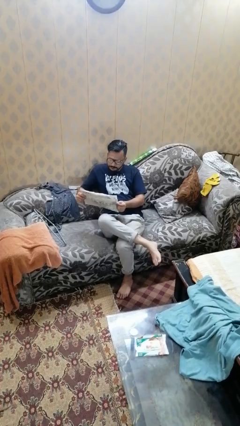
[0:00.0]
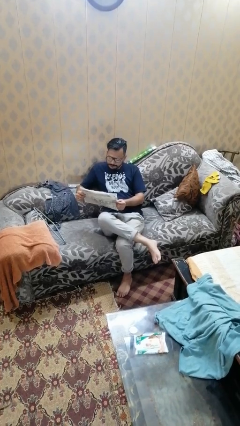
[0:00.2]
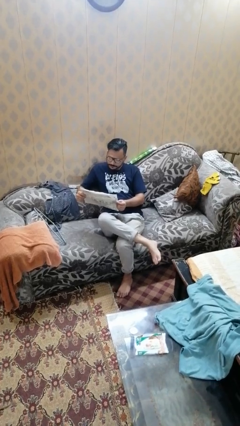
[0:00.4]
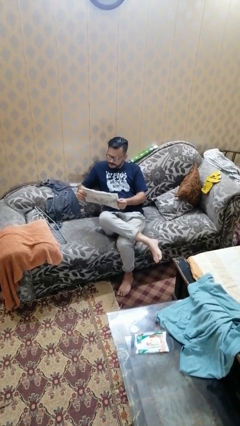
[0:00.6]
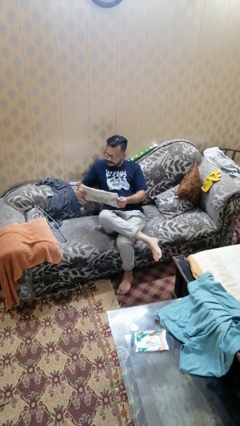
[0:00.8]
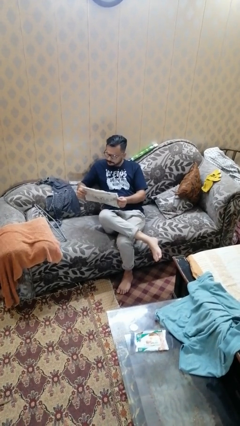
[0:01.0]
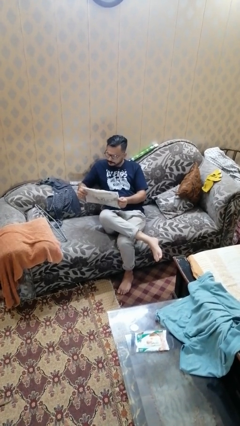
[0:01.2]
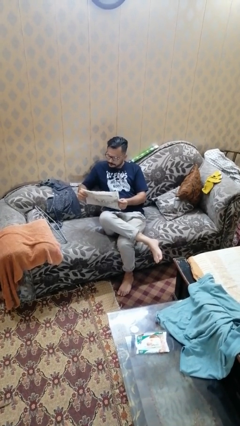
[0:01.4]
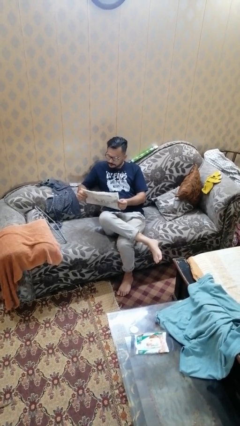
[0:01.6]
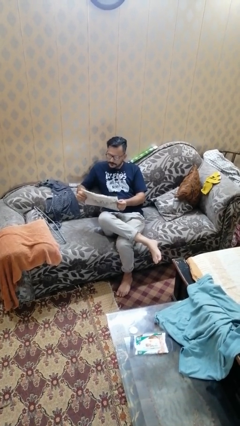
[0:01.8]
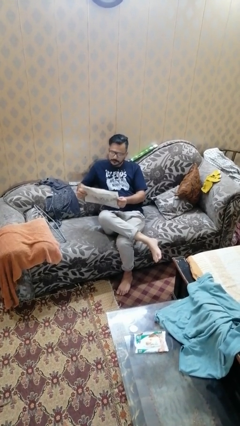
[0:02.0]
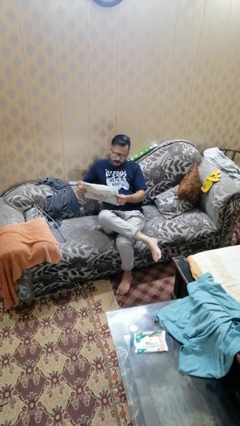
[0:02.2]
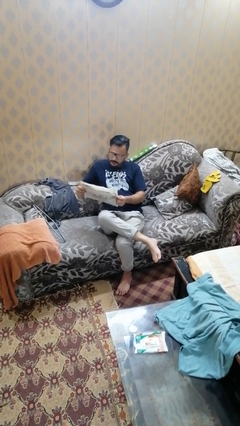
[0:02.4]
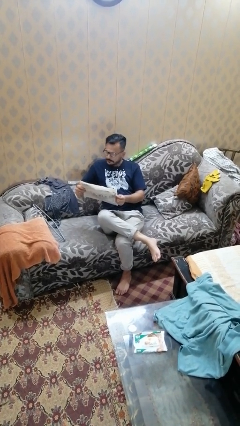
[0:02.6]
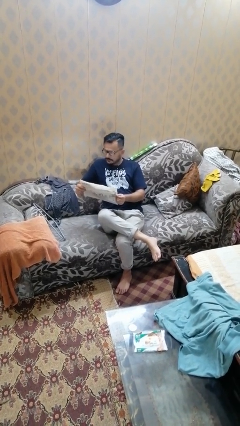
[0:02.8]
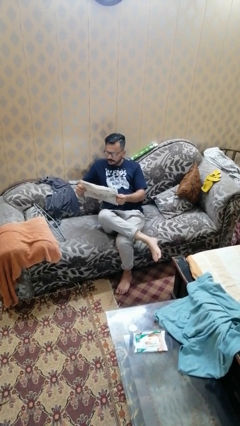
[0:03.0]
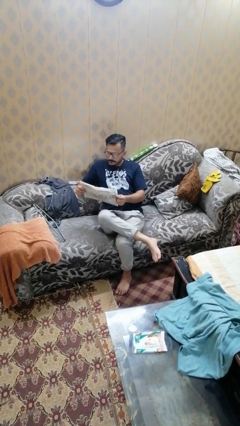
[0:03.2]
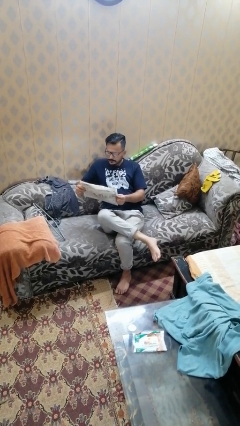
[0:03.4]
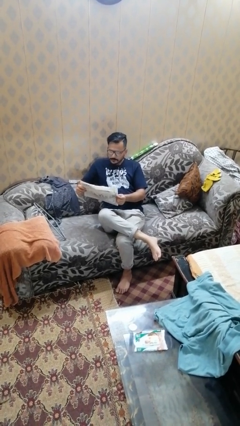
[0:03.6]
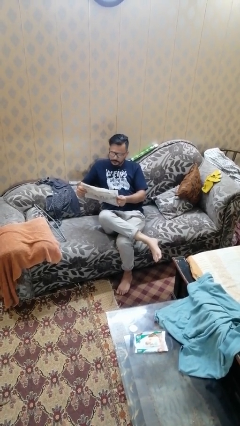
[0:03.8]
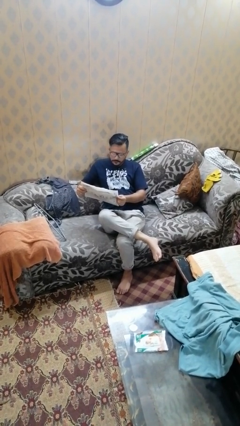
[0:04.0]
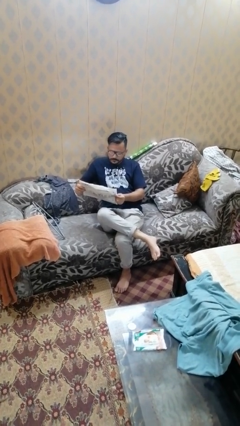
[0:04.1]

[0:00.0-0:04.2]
person reads newspaper

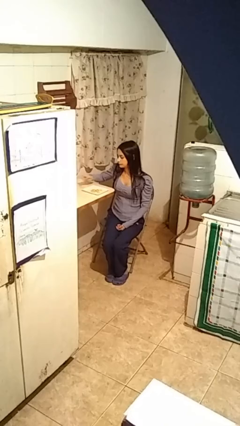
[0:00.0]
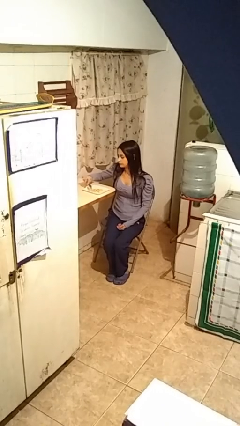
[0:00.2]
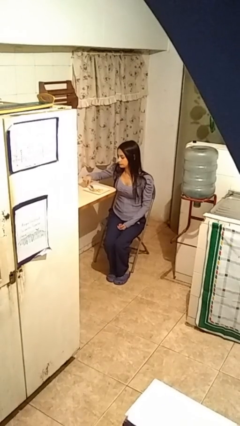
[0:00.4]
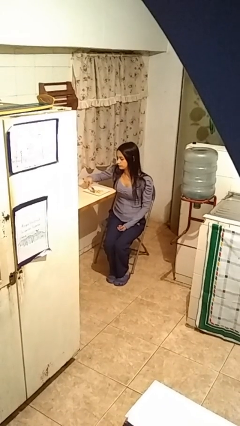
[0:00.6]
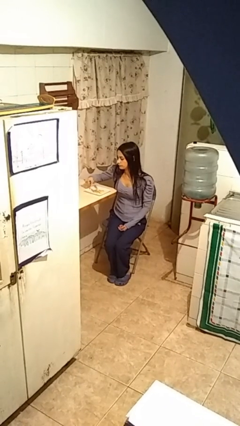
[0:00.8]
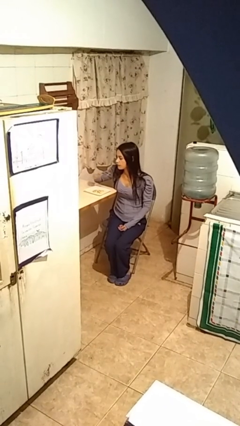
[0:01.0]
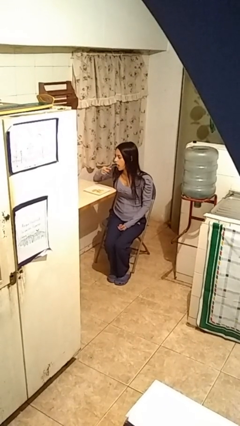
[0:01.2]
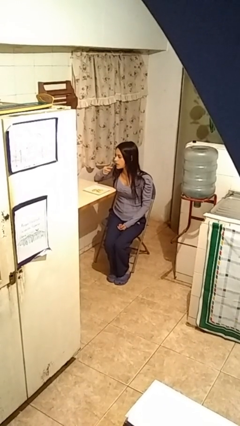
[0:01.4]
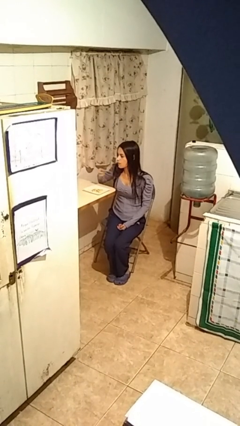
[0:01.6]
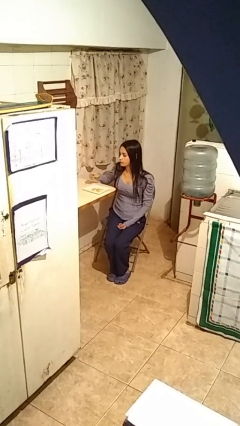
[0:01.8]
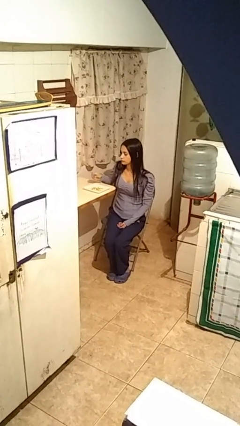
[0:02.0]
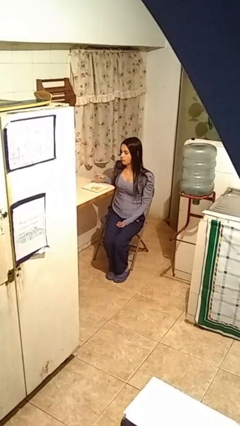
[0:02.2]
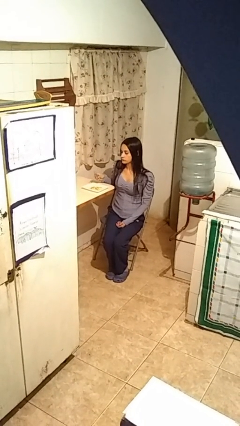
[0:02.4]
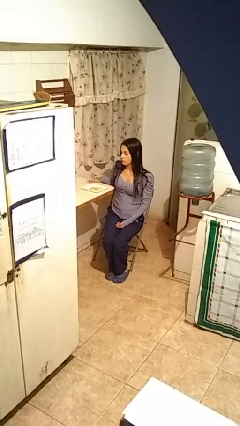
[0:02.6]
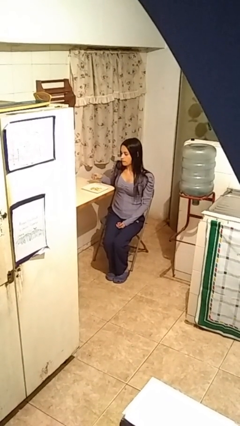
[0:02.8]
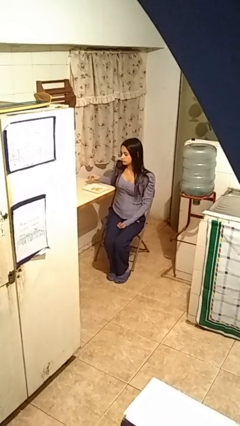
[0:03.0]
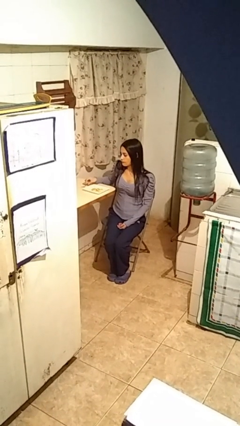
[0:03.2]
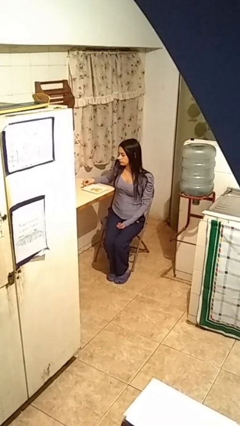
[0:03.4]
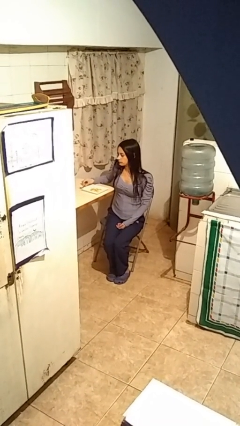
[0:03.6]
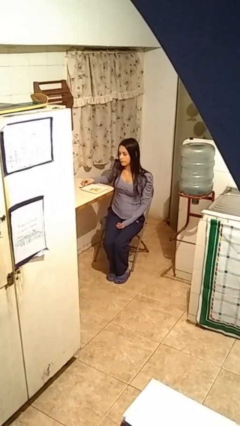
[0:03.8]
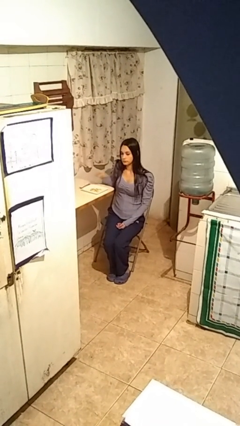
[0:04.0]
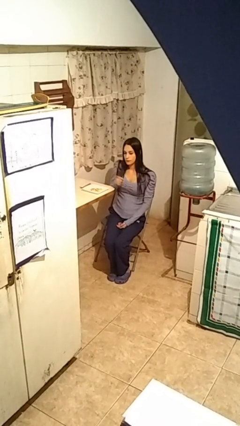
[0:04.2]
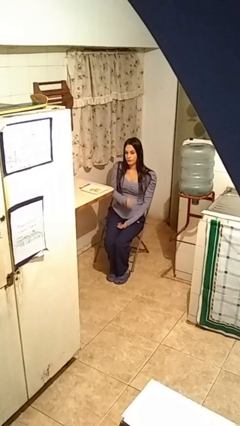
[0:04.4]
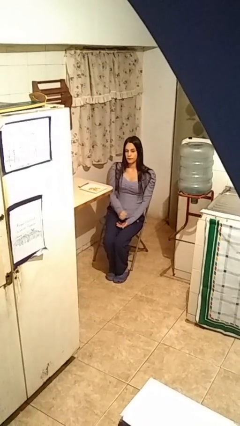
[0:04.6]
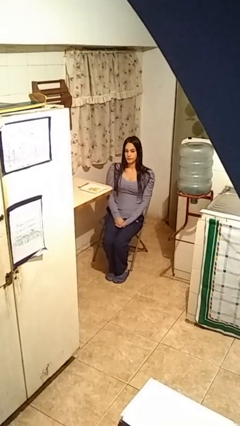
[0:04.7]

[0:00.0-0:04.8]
person eats with utensil

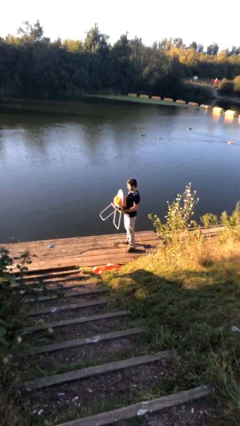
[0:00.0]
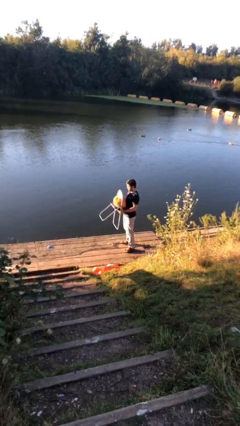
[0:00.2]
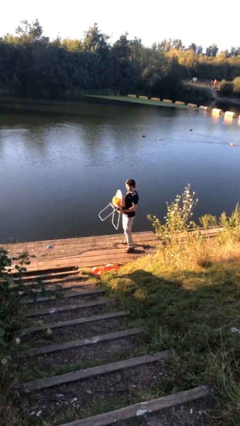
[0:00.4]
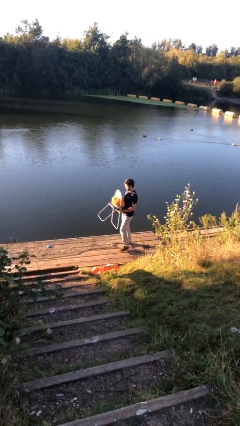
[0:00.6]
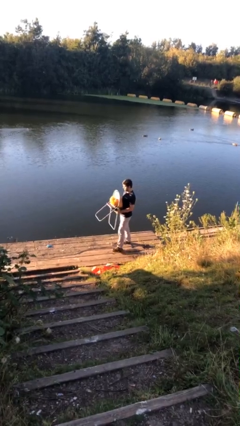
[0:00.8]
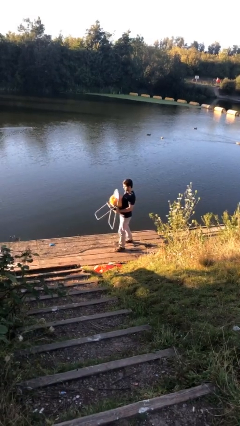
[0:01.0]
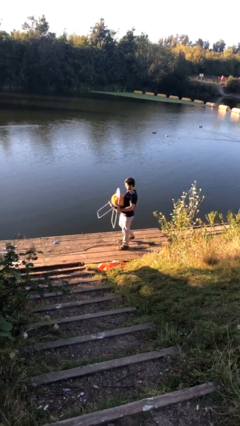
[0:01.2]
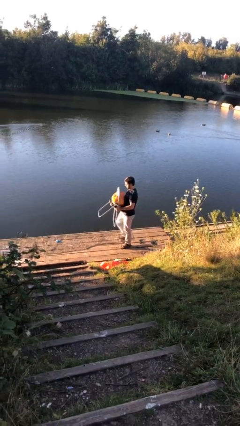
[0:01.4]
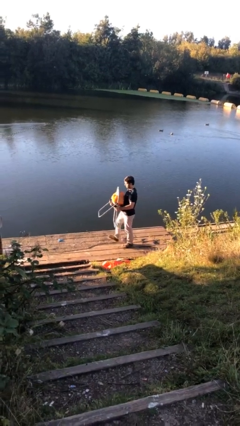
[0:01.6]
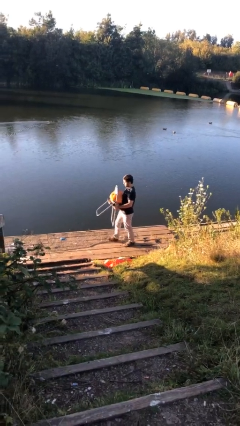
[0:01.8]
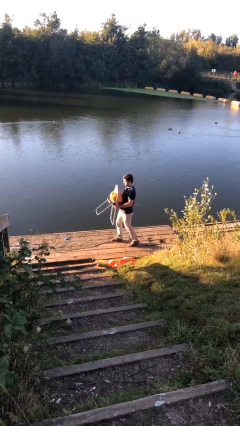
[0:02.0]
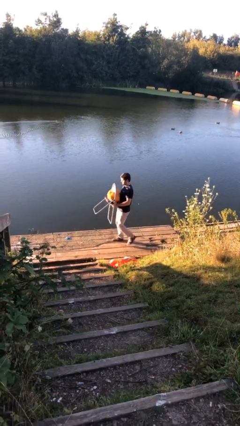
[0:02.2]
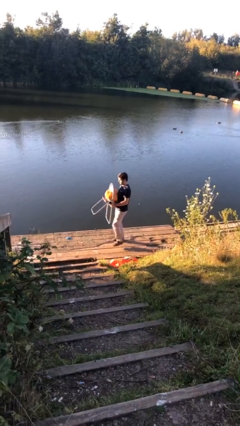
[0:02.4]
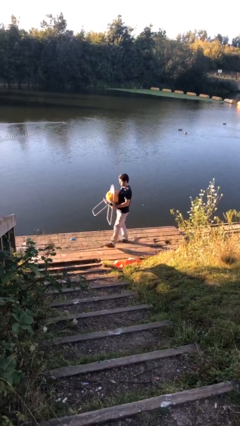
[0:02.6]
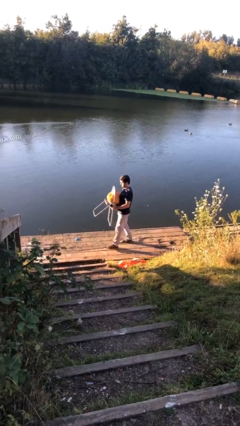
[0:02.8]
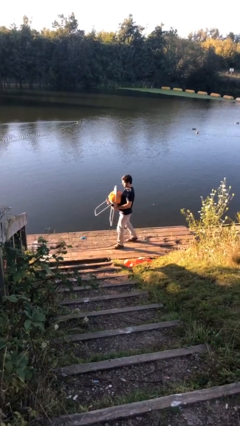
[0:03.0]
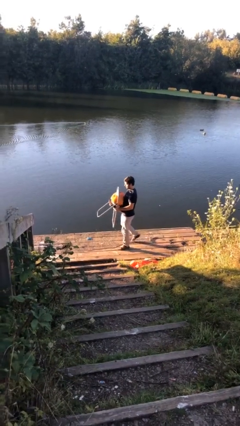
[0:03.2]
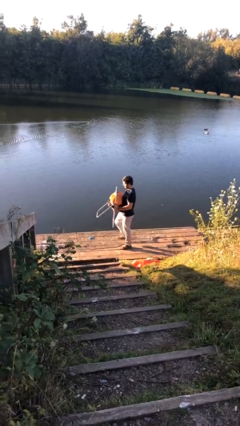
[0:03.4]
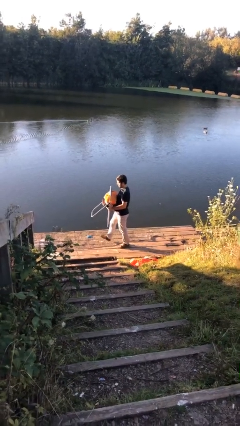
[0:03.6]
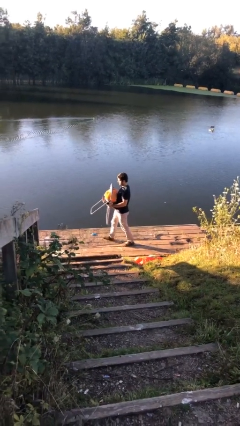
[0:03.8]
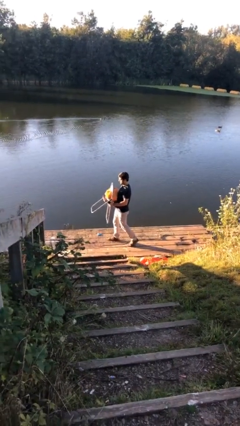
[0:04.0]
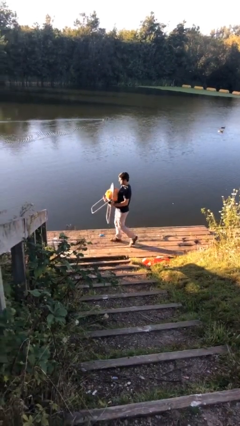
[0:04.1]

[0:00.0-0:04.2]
person carries heavy object

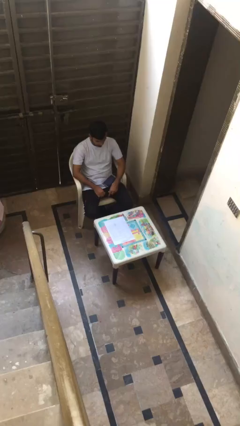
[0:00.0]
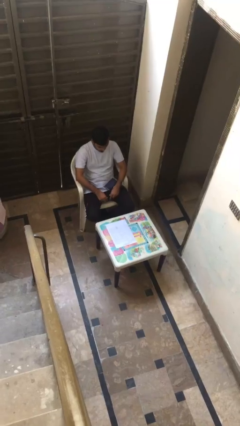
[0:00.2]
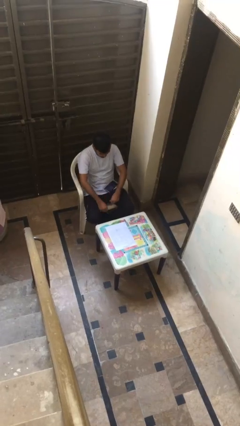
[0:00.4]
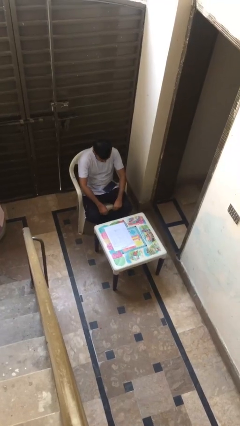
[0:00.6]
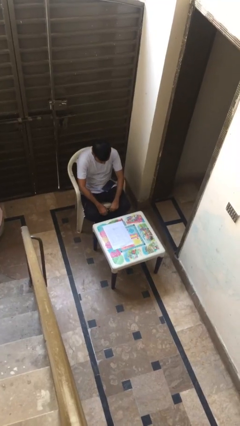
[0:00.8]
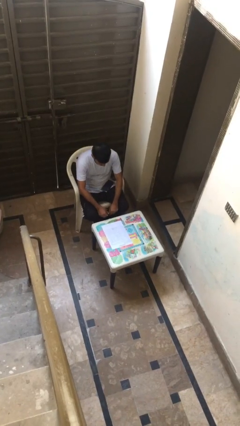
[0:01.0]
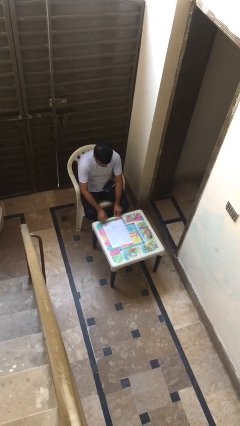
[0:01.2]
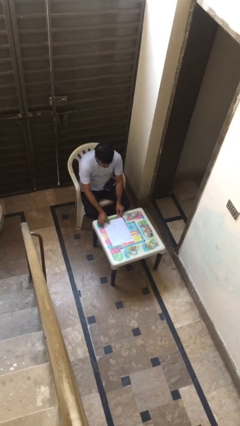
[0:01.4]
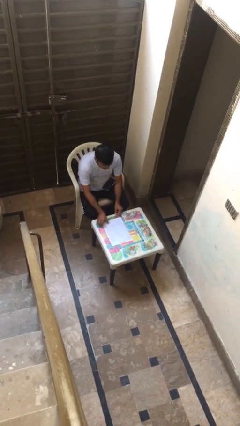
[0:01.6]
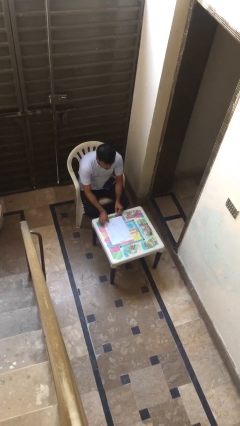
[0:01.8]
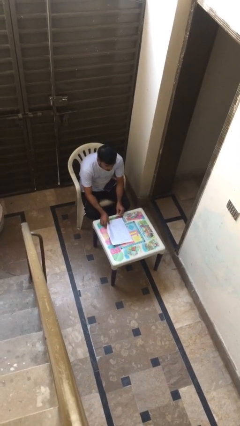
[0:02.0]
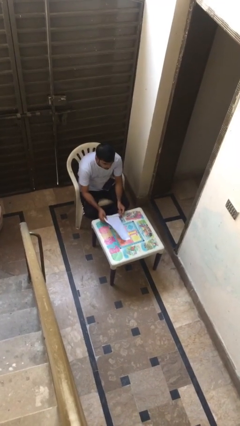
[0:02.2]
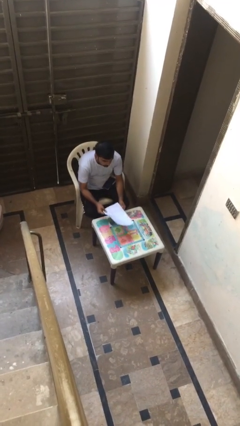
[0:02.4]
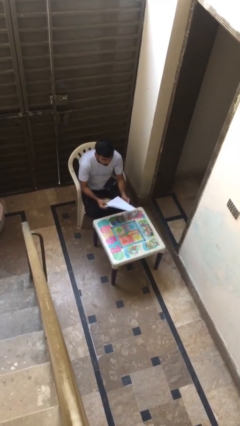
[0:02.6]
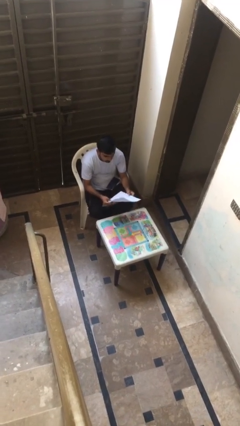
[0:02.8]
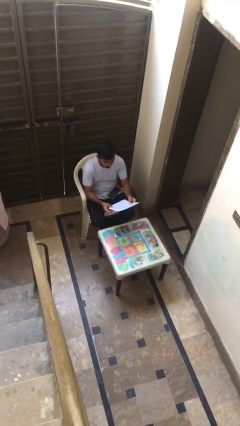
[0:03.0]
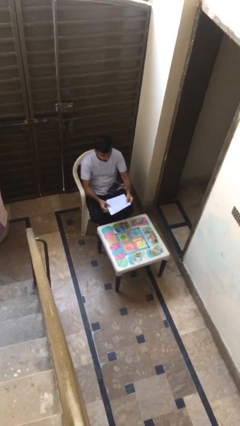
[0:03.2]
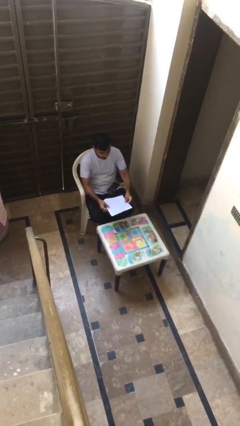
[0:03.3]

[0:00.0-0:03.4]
person picks up object from table

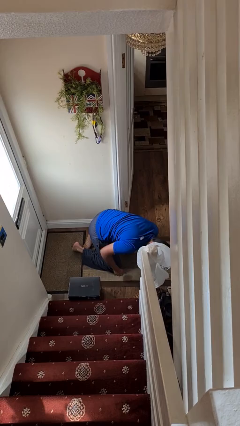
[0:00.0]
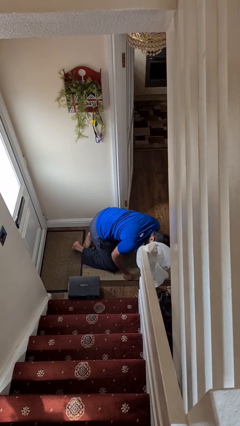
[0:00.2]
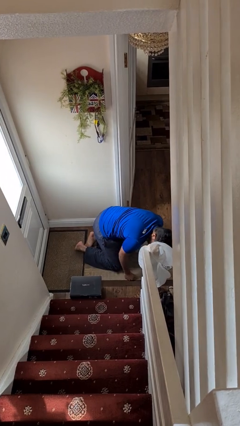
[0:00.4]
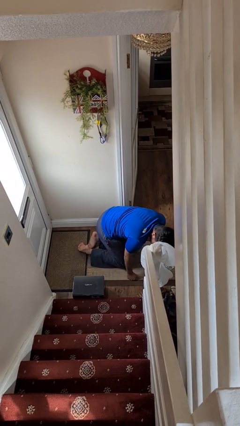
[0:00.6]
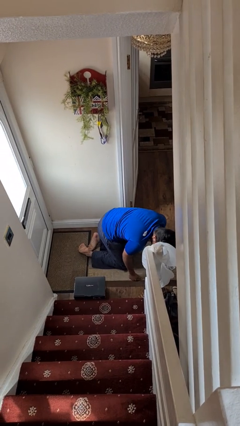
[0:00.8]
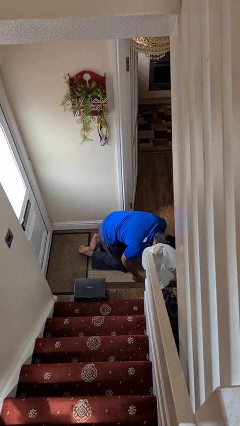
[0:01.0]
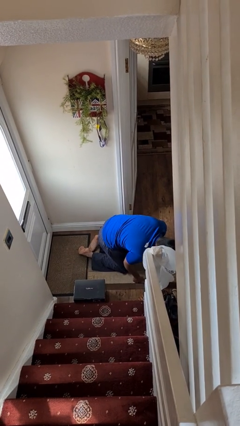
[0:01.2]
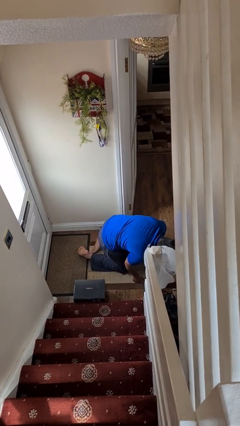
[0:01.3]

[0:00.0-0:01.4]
person lies down on floor
